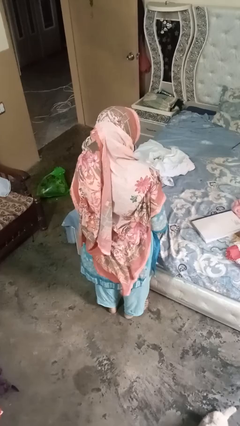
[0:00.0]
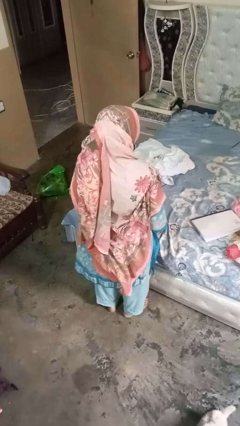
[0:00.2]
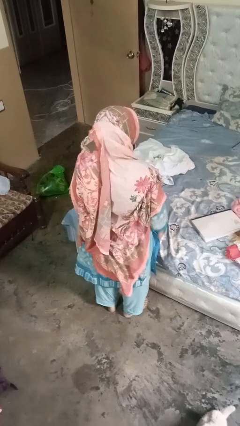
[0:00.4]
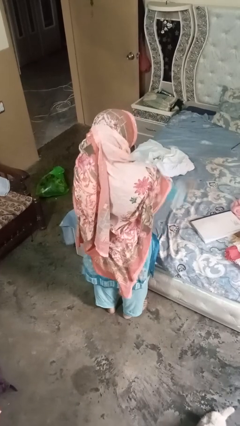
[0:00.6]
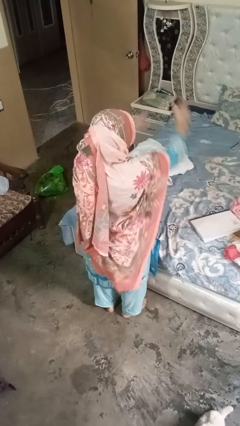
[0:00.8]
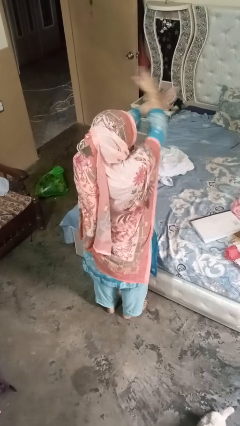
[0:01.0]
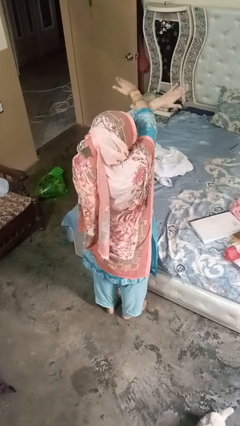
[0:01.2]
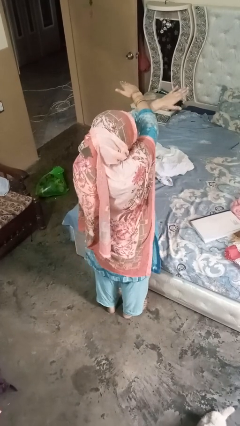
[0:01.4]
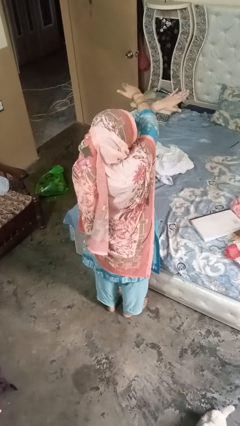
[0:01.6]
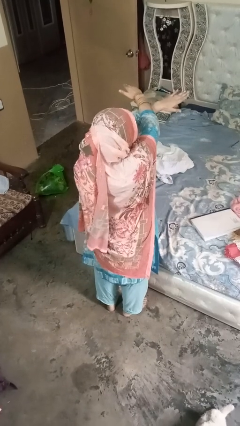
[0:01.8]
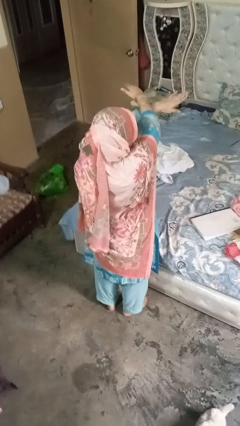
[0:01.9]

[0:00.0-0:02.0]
person gestures arms x

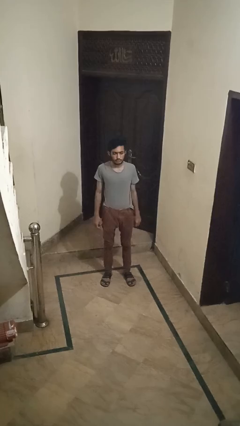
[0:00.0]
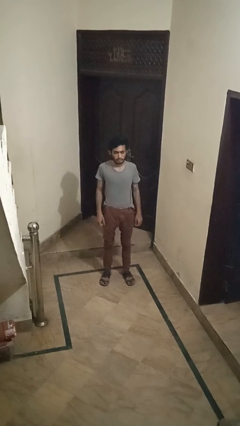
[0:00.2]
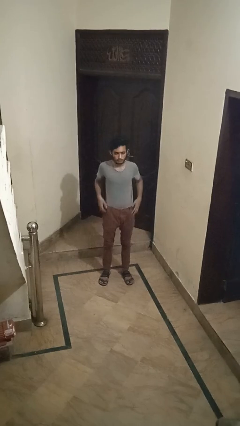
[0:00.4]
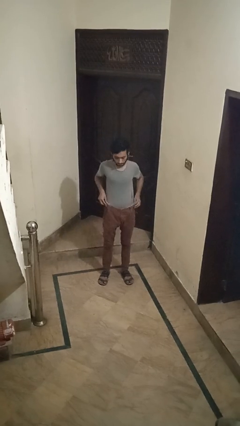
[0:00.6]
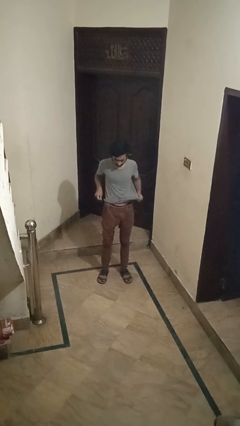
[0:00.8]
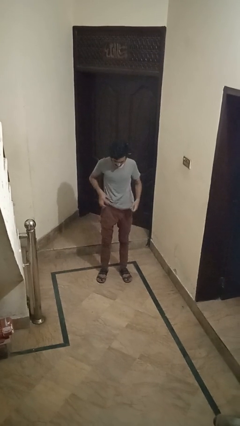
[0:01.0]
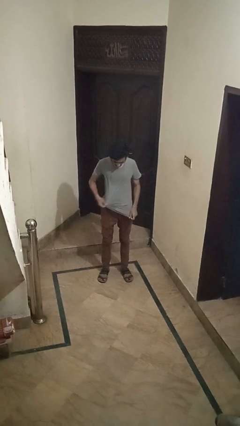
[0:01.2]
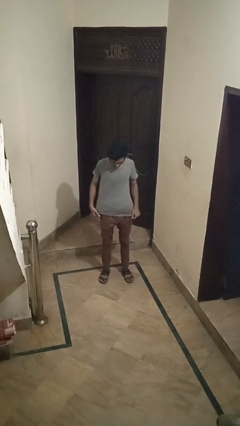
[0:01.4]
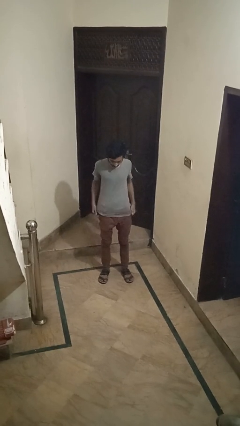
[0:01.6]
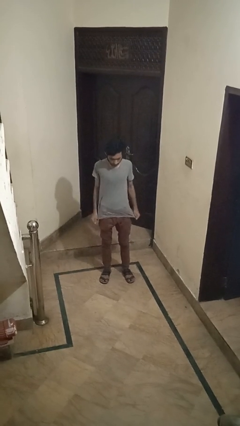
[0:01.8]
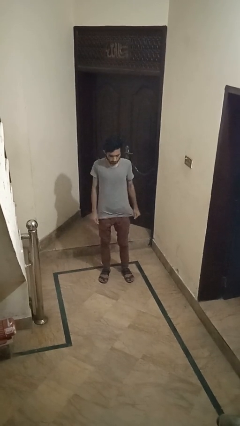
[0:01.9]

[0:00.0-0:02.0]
person untucks shirt

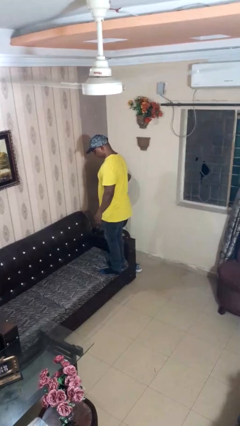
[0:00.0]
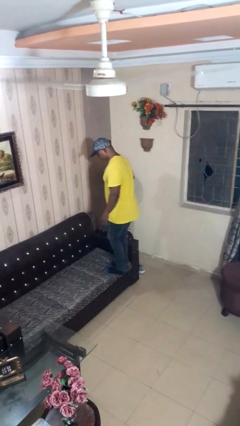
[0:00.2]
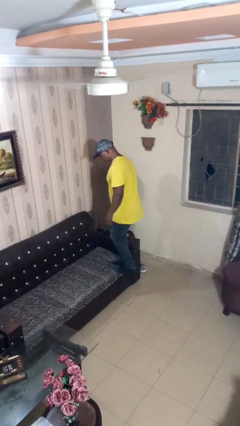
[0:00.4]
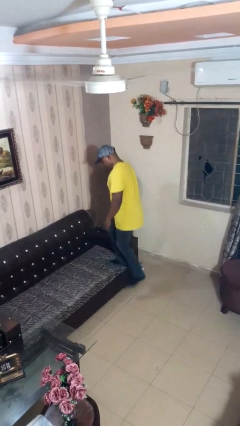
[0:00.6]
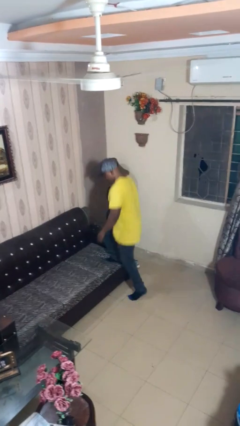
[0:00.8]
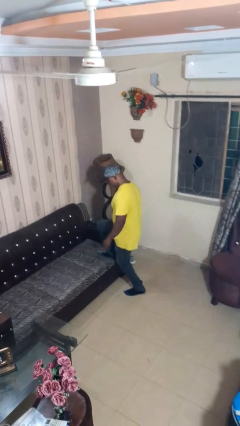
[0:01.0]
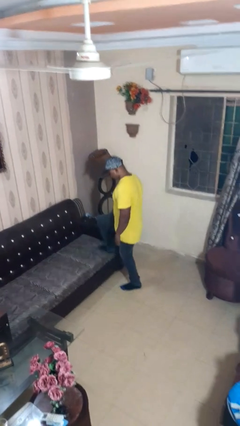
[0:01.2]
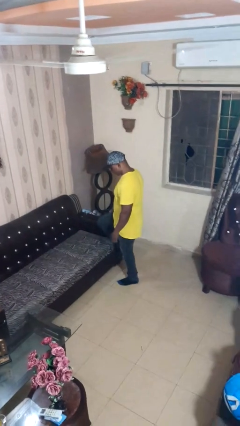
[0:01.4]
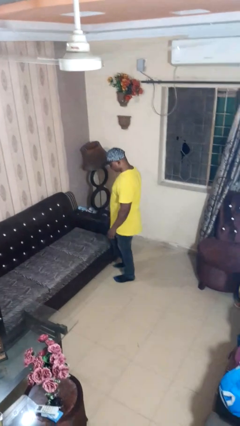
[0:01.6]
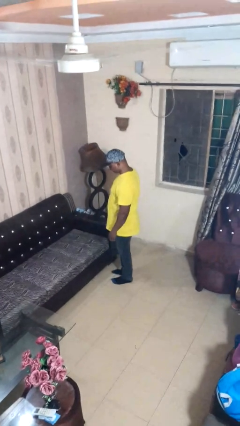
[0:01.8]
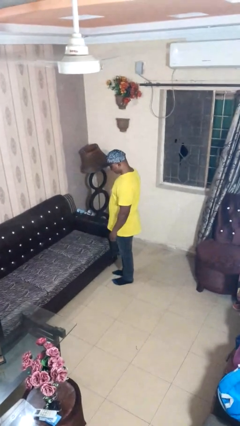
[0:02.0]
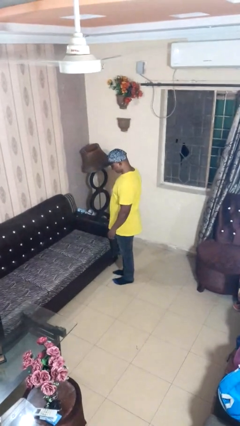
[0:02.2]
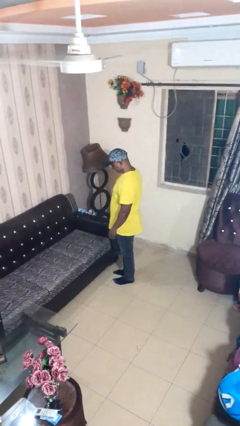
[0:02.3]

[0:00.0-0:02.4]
person climbs off couch

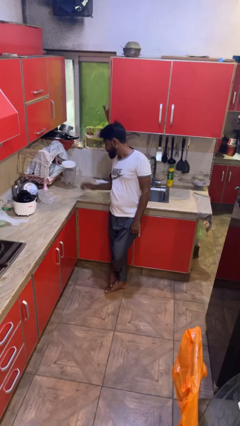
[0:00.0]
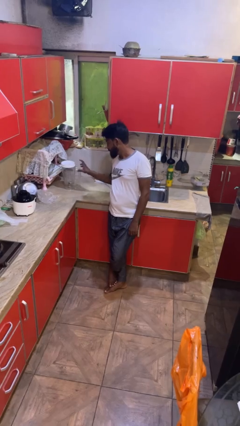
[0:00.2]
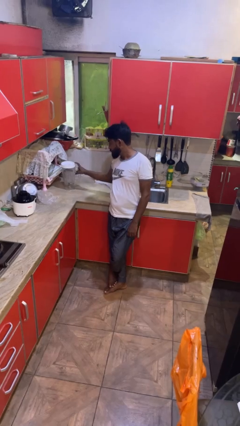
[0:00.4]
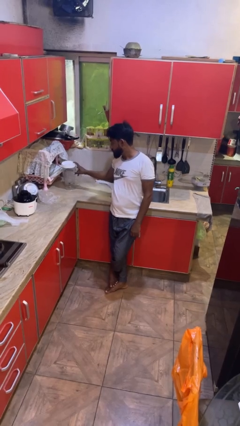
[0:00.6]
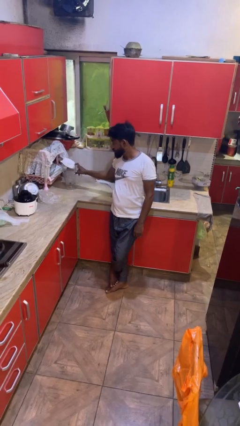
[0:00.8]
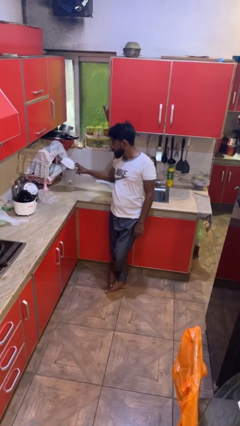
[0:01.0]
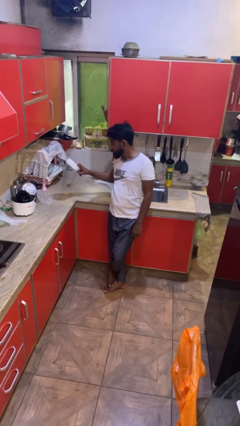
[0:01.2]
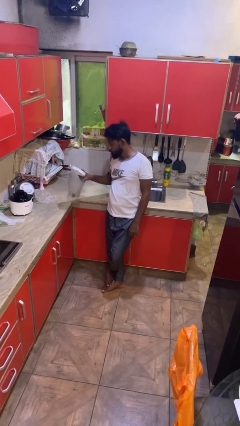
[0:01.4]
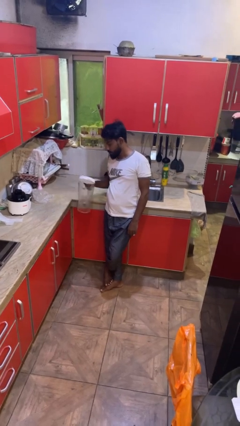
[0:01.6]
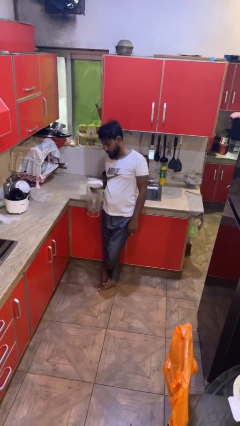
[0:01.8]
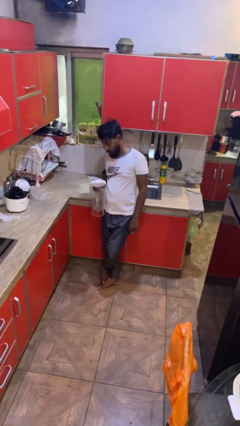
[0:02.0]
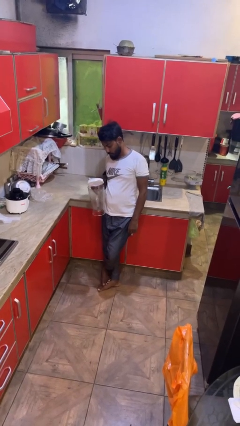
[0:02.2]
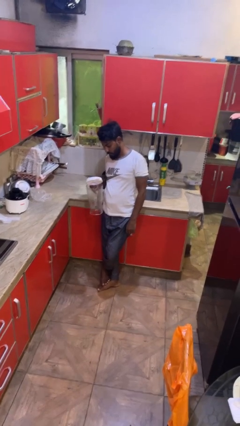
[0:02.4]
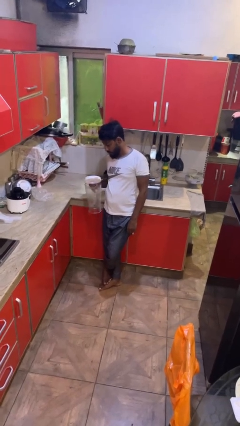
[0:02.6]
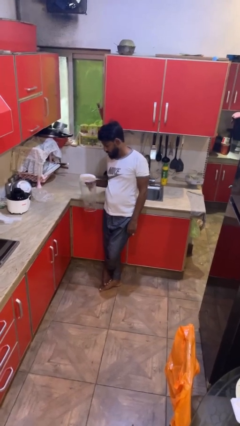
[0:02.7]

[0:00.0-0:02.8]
person picks up object from countertop

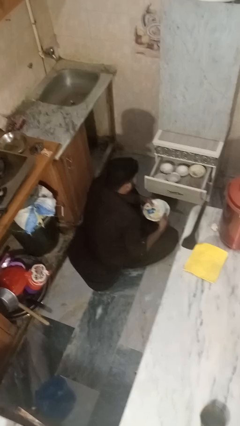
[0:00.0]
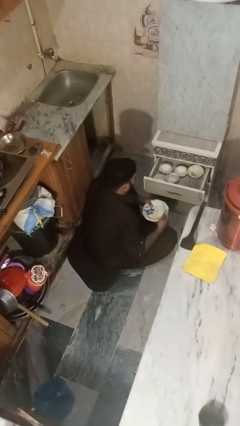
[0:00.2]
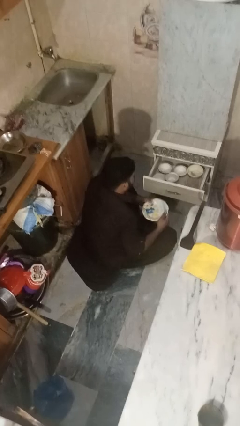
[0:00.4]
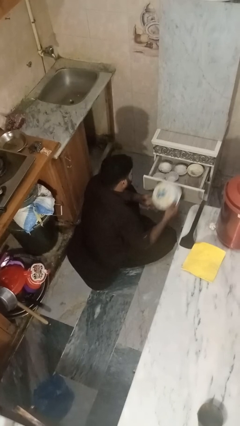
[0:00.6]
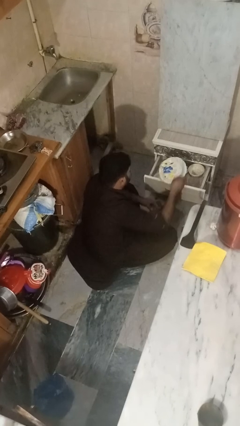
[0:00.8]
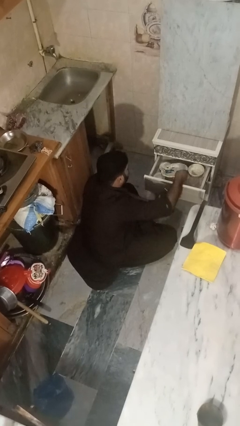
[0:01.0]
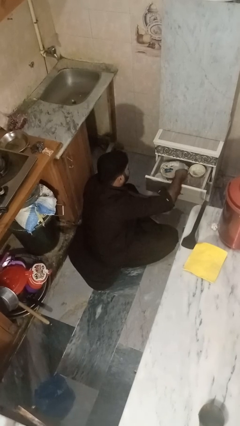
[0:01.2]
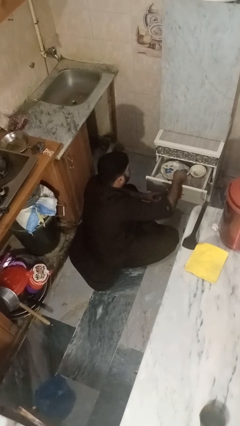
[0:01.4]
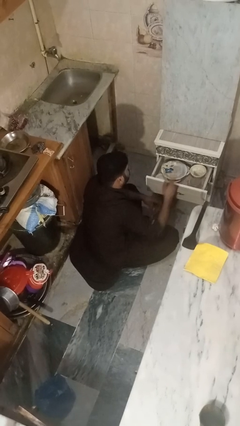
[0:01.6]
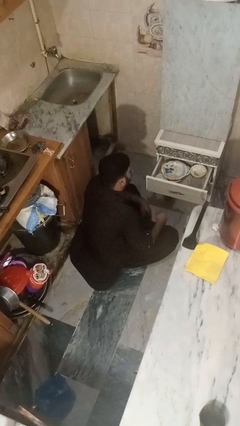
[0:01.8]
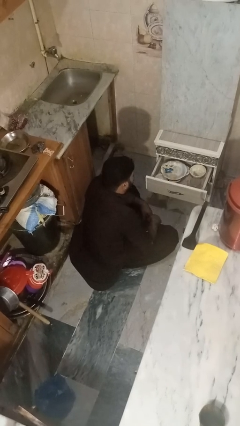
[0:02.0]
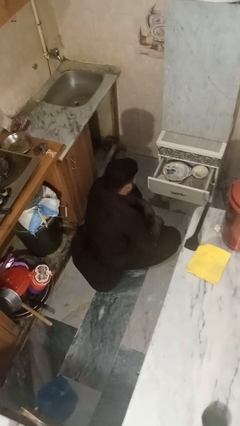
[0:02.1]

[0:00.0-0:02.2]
person puts object into kitchen drawer

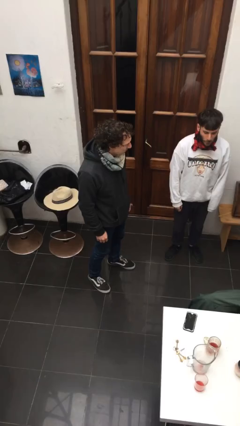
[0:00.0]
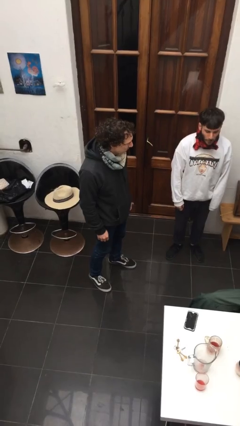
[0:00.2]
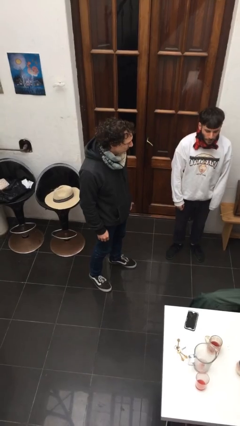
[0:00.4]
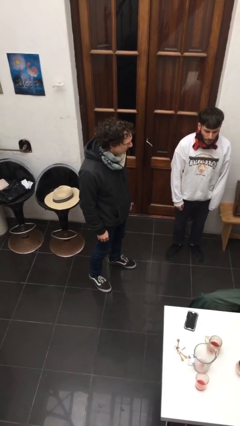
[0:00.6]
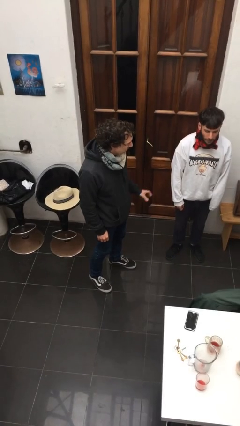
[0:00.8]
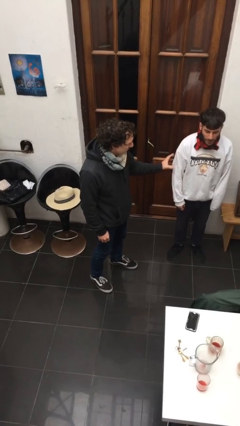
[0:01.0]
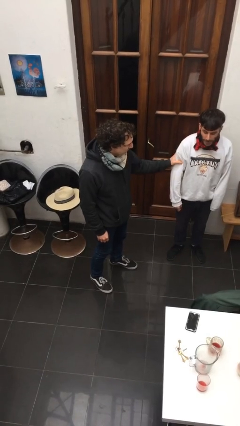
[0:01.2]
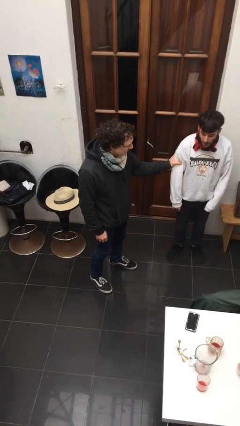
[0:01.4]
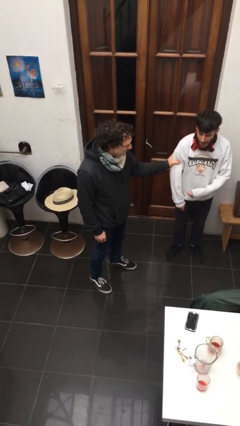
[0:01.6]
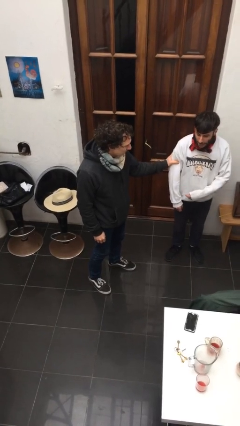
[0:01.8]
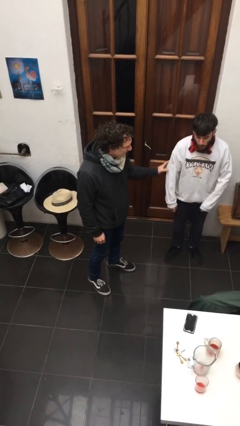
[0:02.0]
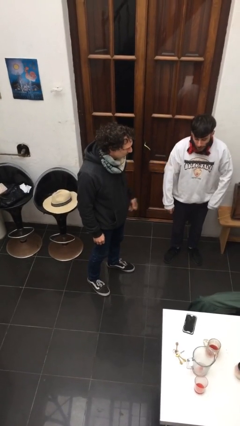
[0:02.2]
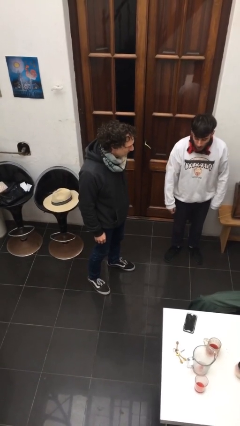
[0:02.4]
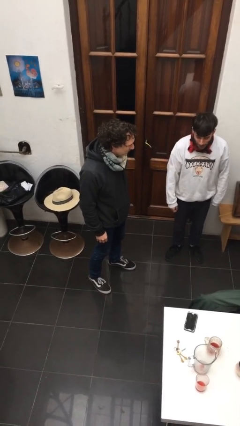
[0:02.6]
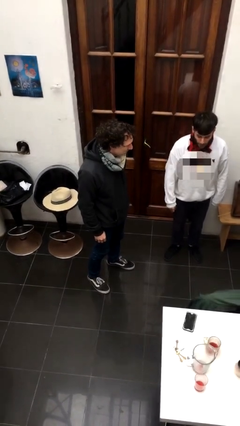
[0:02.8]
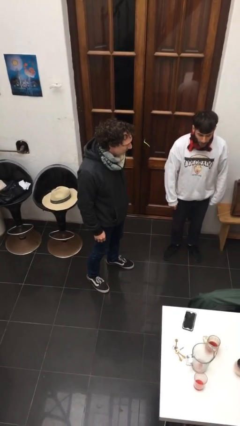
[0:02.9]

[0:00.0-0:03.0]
person grabs person by bicep

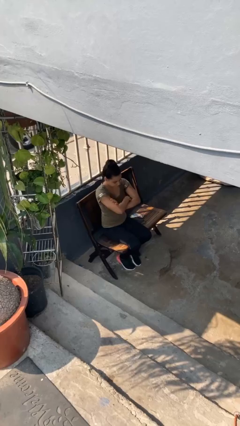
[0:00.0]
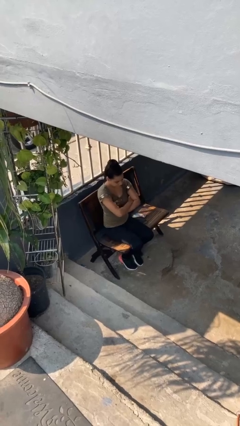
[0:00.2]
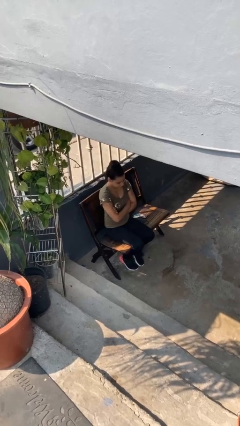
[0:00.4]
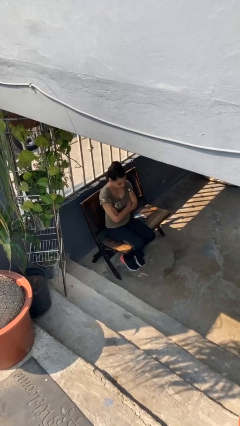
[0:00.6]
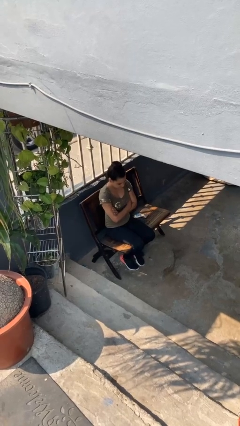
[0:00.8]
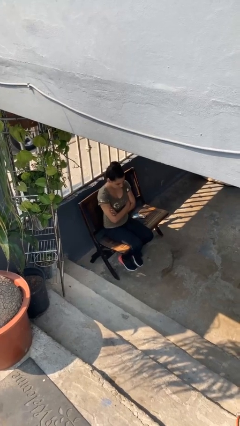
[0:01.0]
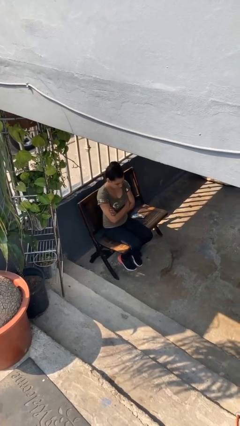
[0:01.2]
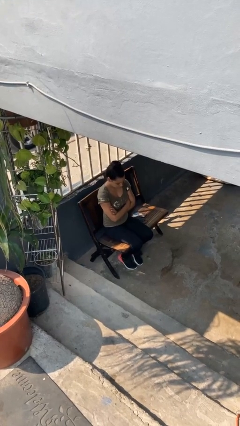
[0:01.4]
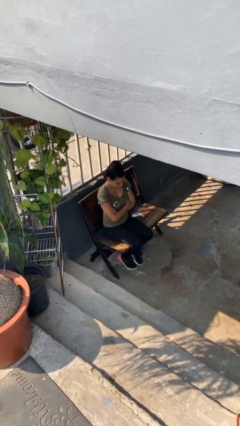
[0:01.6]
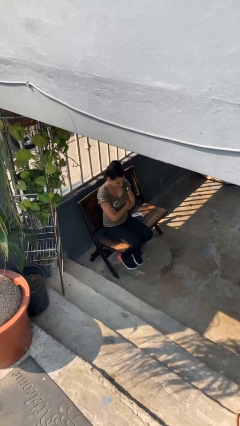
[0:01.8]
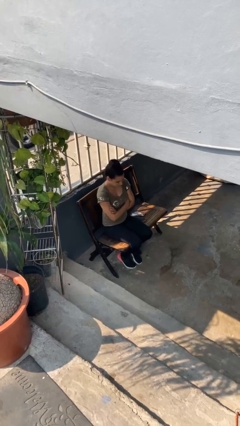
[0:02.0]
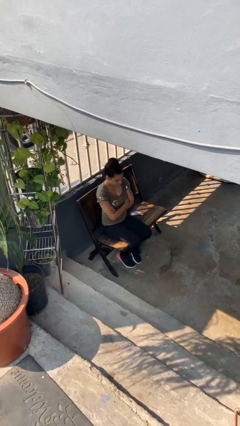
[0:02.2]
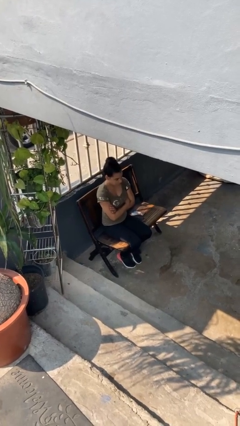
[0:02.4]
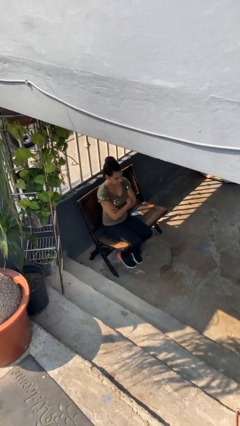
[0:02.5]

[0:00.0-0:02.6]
person crosses arms
